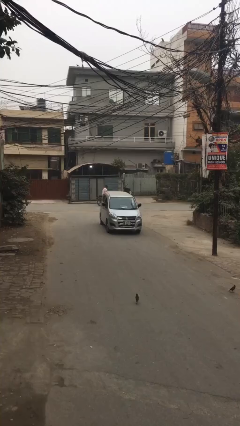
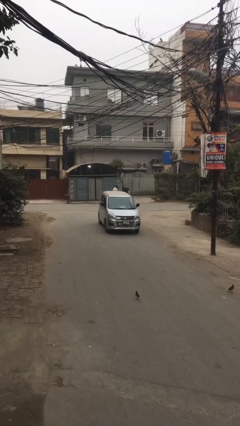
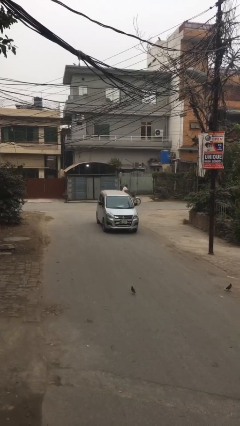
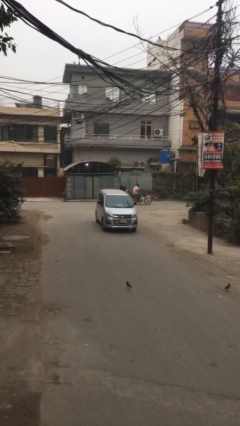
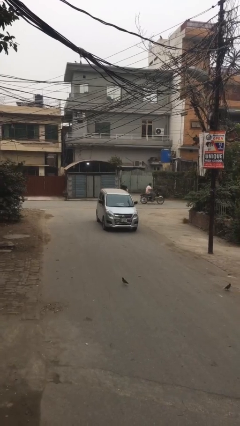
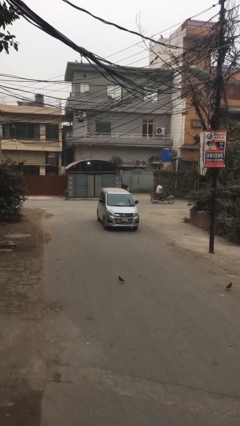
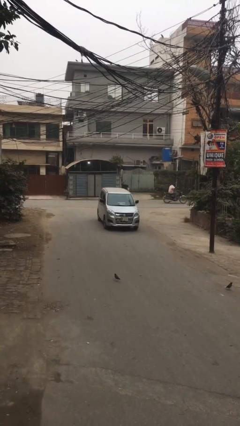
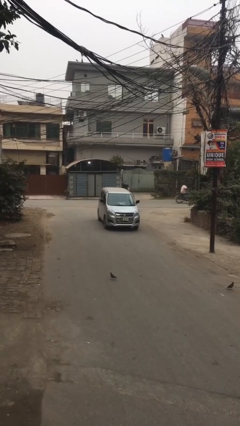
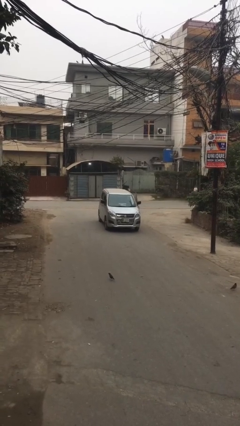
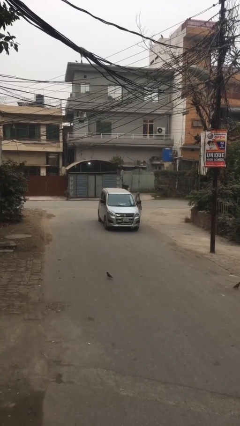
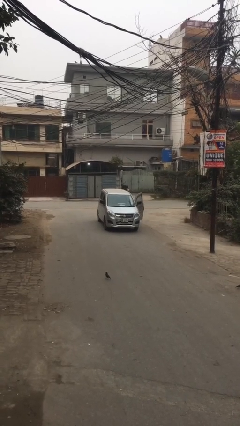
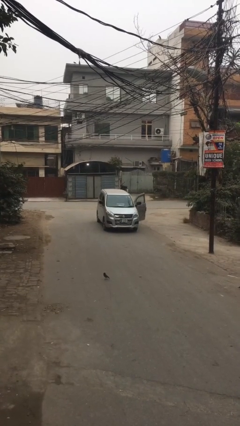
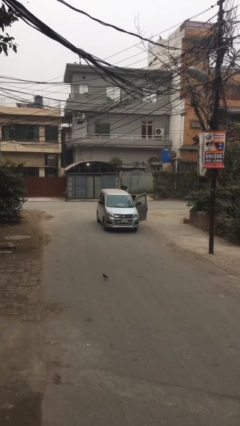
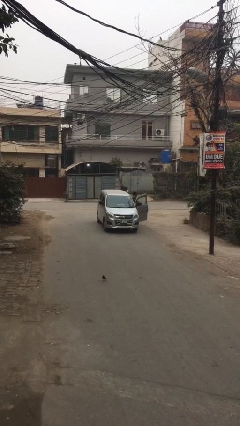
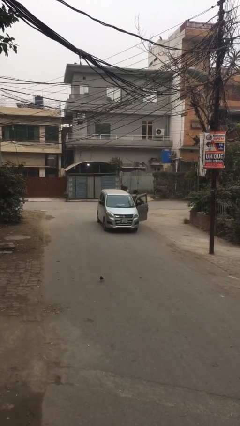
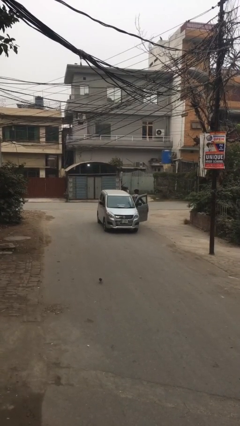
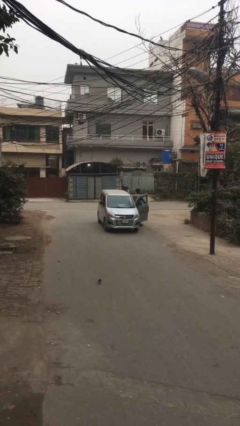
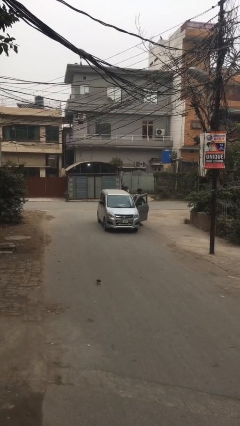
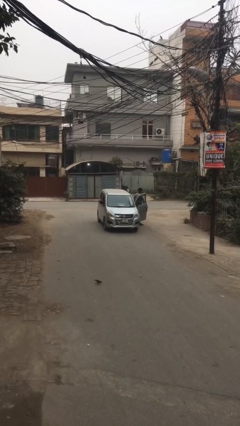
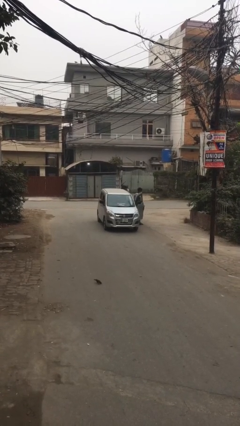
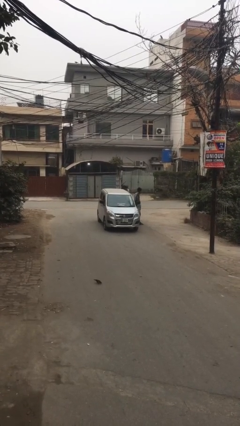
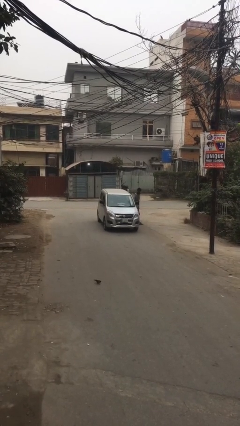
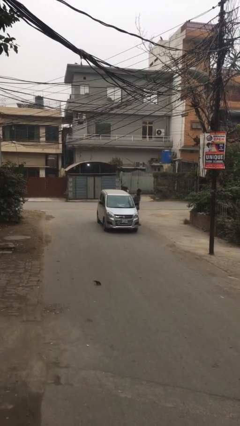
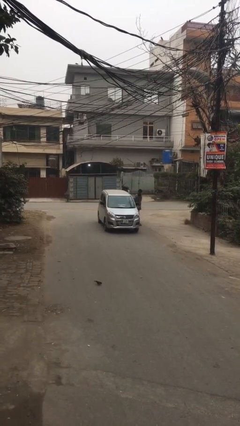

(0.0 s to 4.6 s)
car drops off person

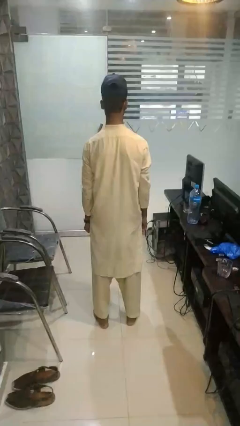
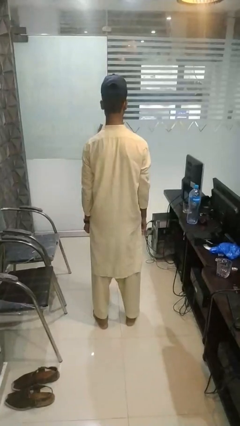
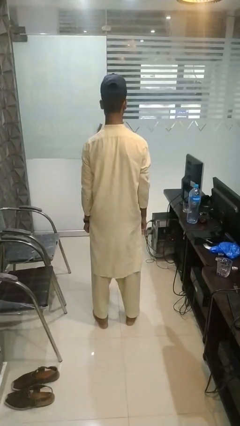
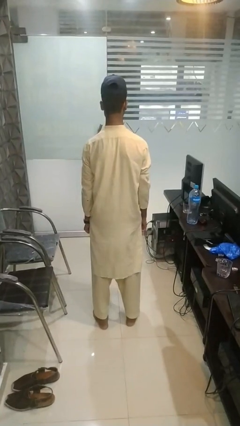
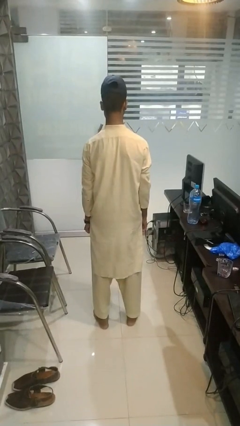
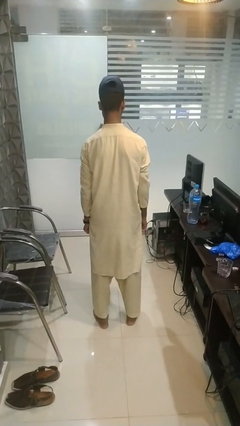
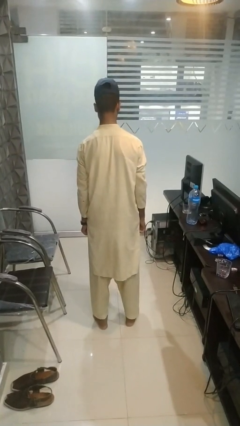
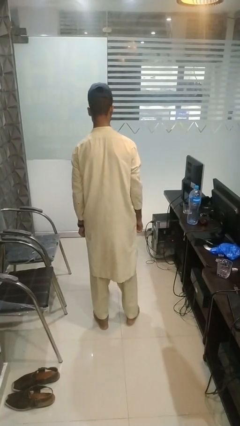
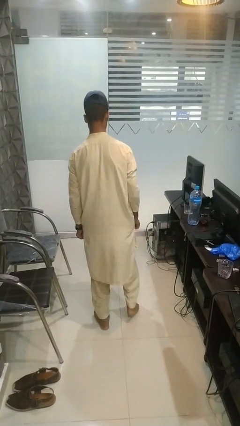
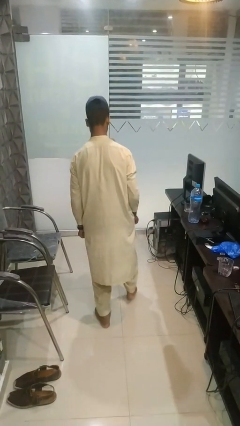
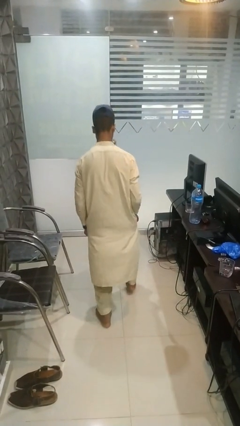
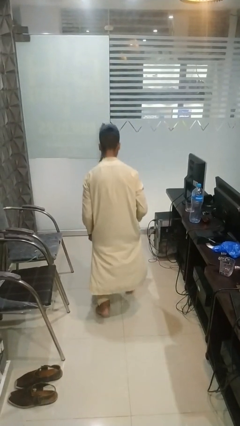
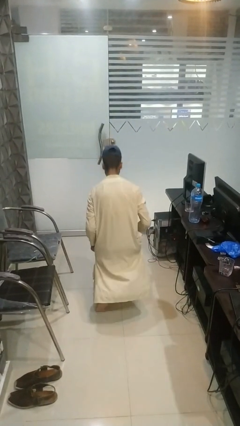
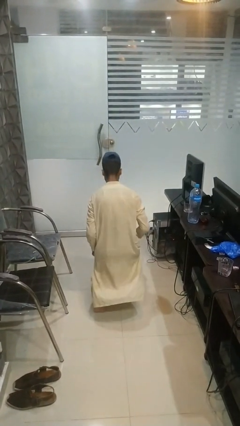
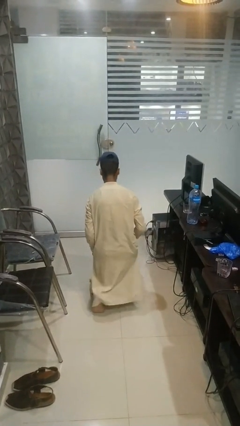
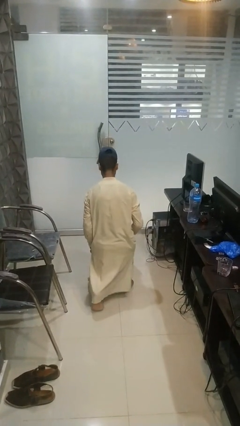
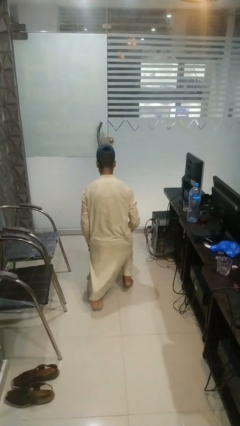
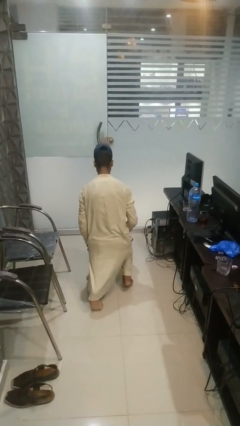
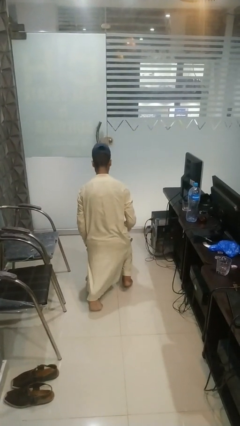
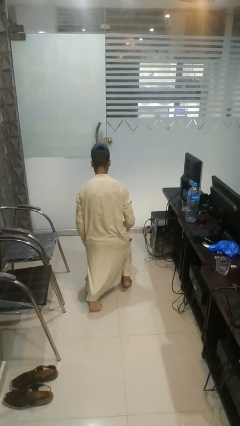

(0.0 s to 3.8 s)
person kneels

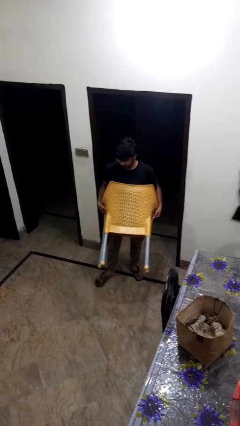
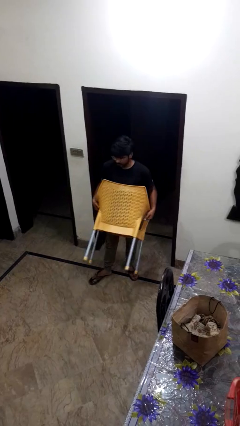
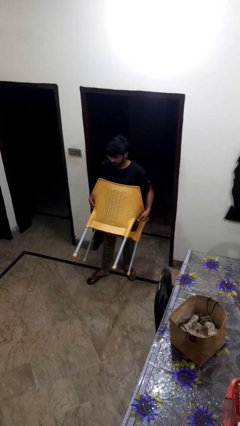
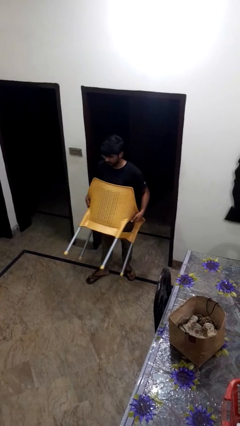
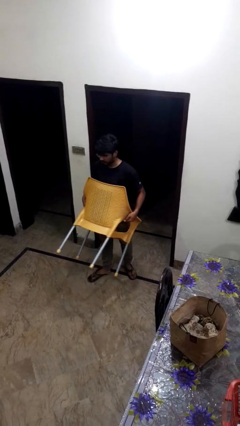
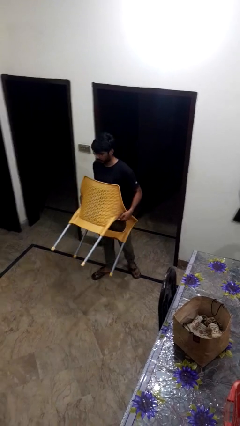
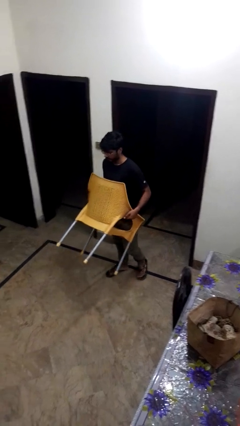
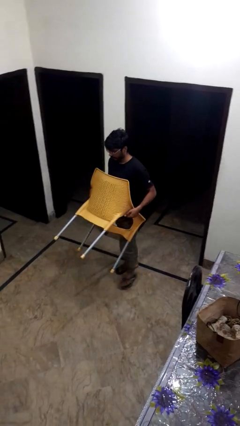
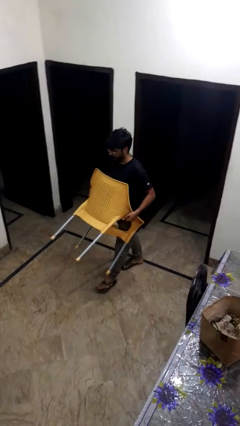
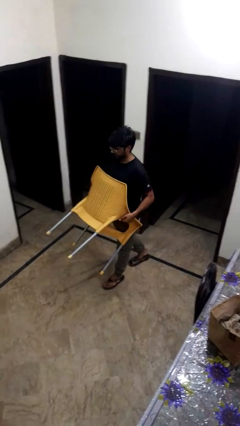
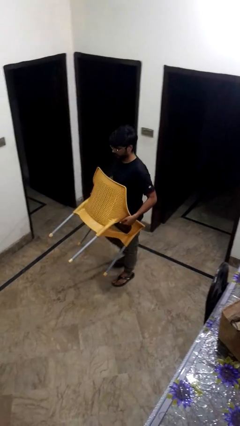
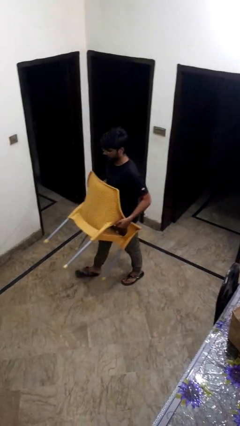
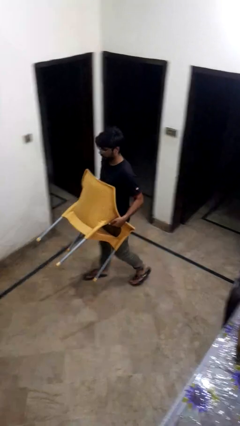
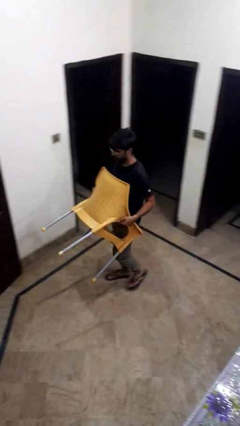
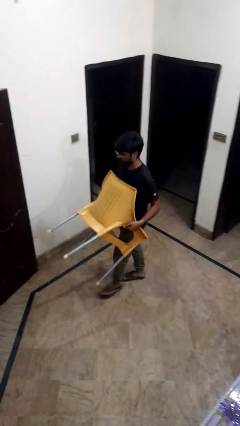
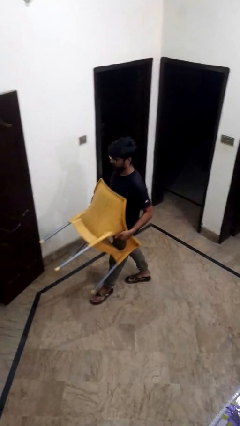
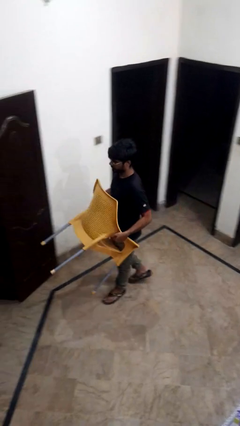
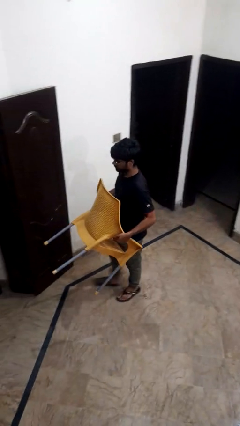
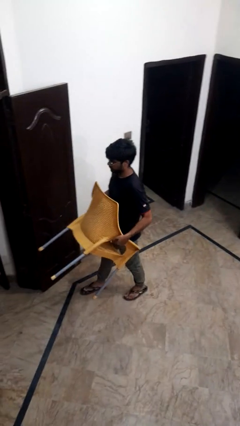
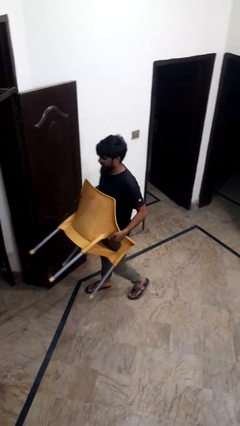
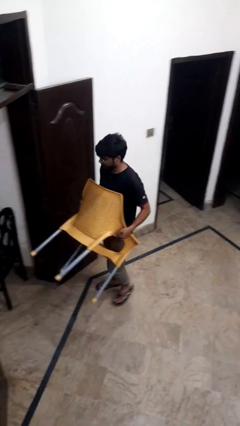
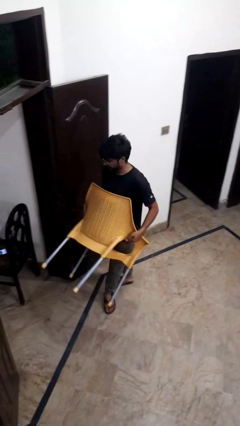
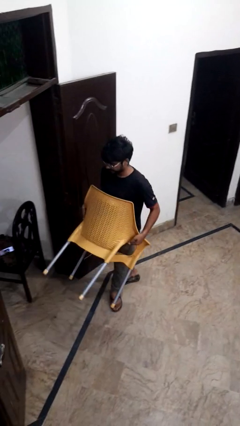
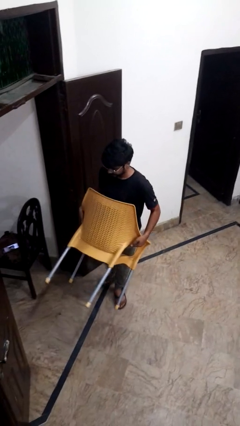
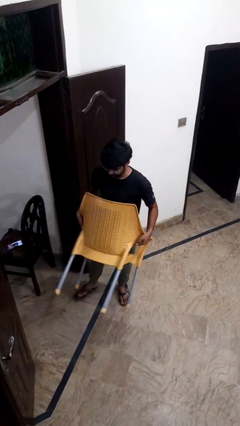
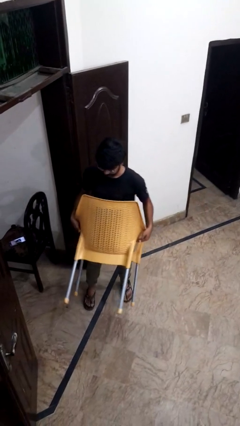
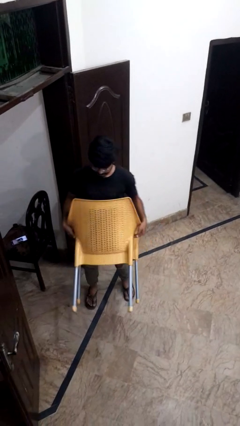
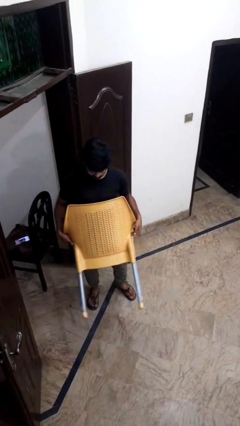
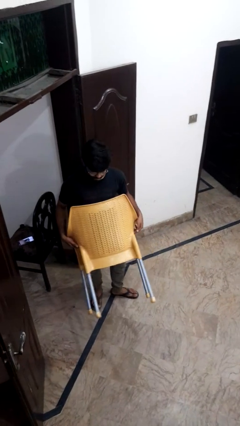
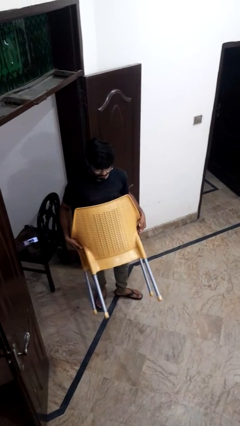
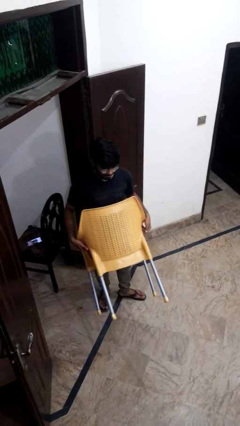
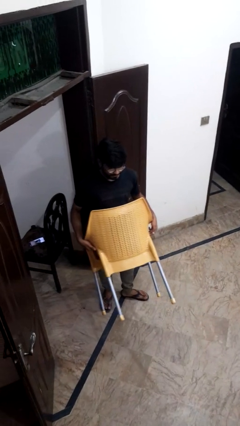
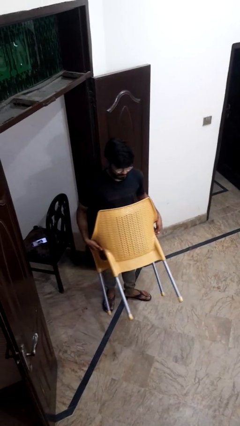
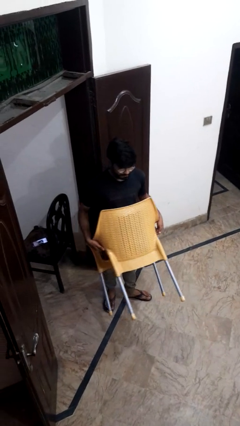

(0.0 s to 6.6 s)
person carries furniture

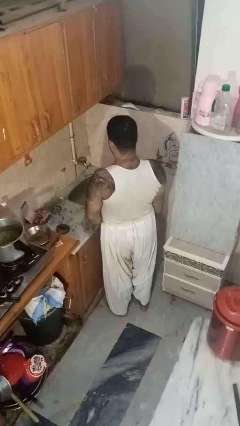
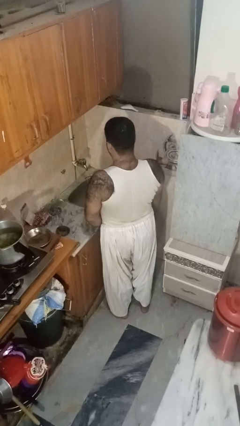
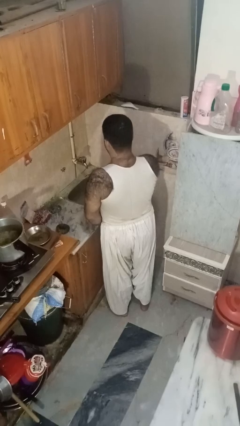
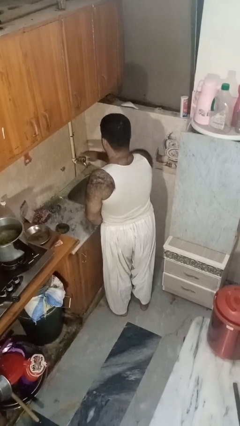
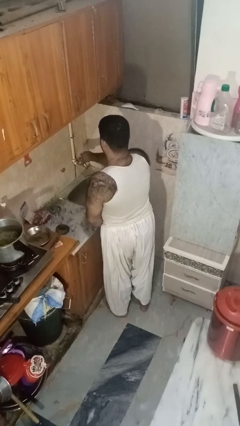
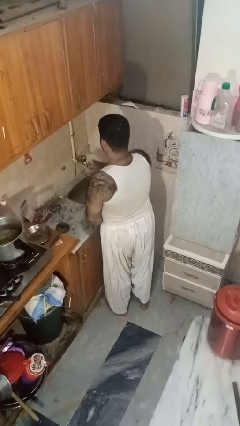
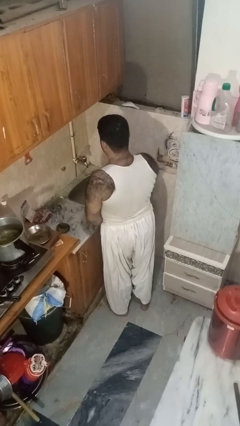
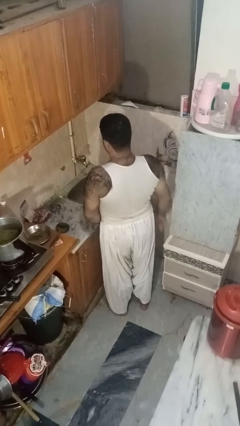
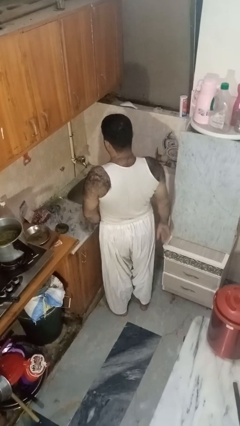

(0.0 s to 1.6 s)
person turns off faucet

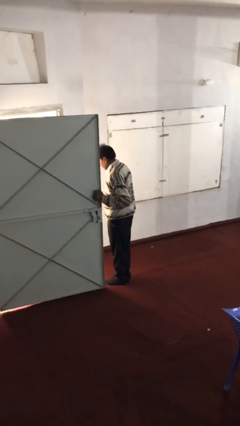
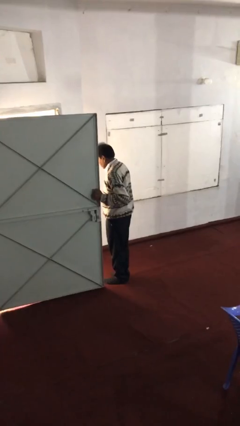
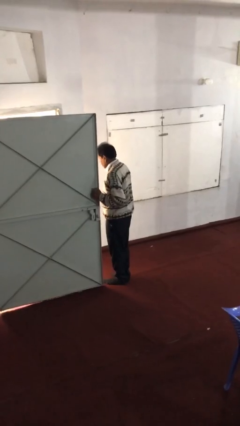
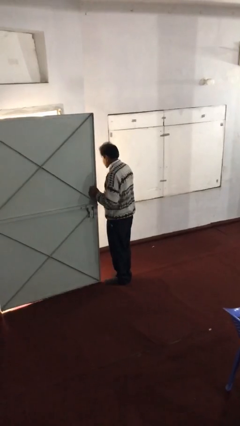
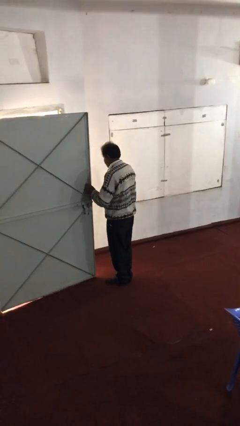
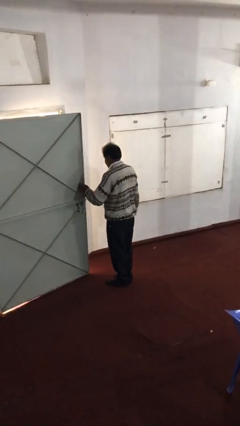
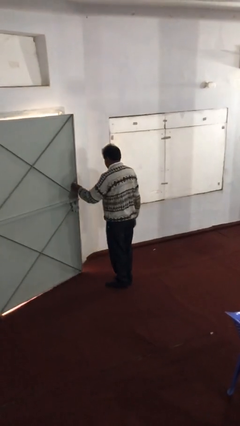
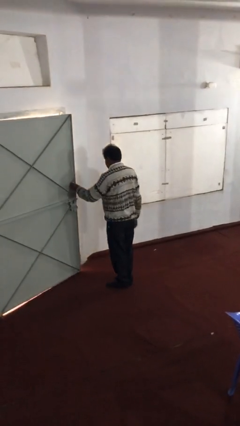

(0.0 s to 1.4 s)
person closes facility door
